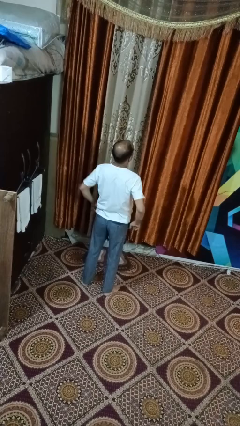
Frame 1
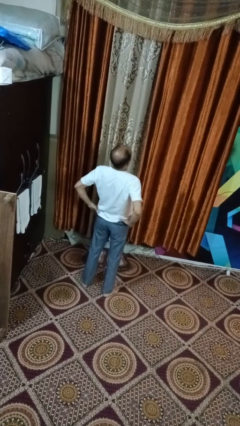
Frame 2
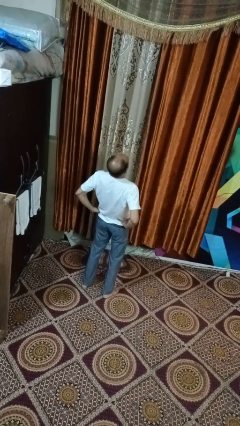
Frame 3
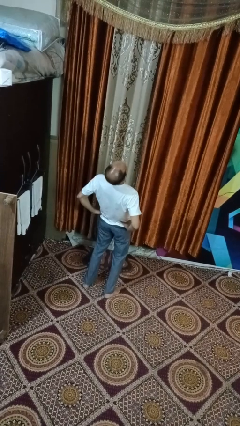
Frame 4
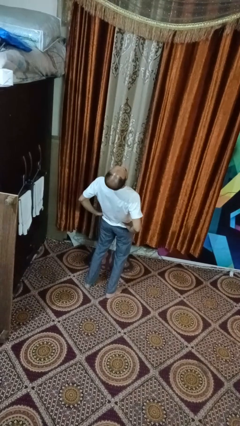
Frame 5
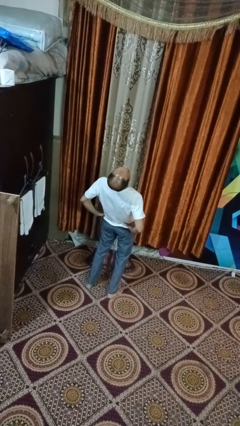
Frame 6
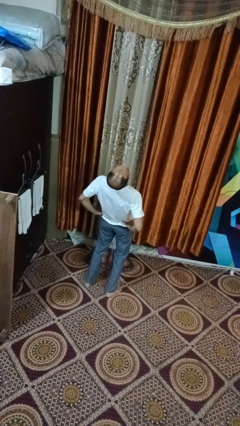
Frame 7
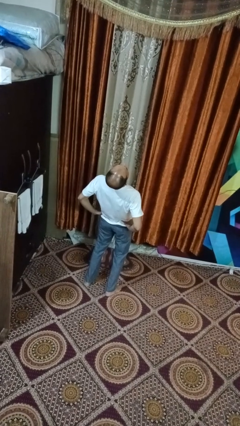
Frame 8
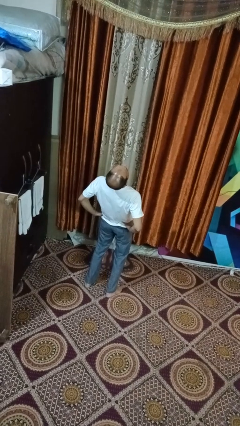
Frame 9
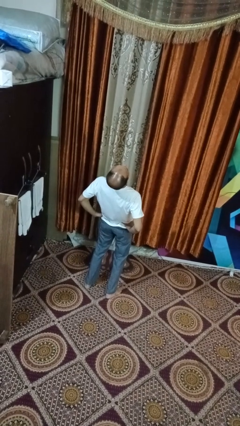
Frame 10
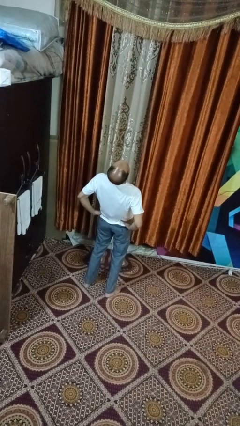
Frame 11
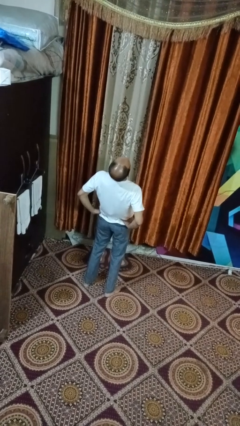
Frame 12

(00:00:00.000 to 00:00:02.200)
person stretches back

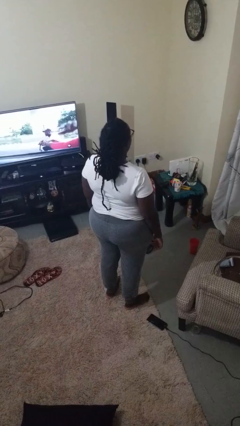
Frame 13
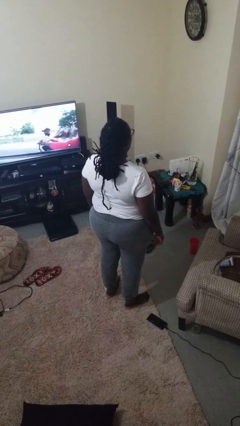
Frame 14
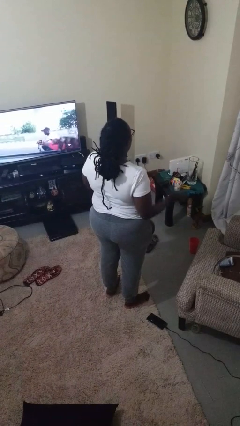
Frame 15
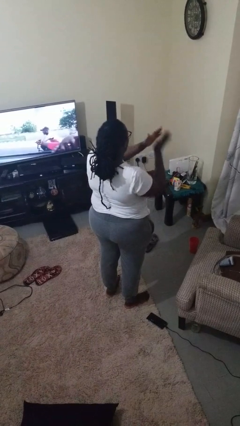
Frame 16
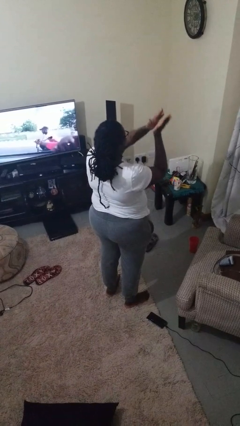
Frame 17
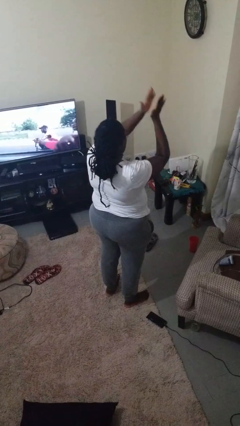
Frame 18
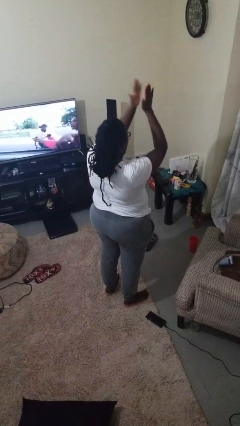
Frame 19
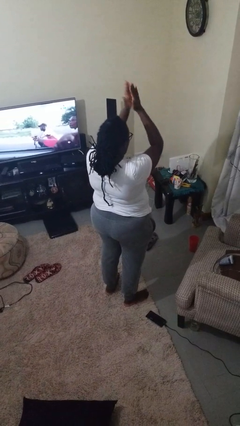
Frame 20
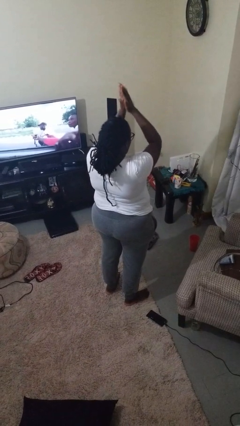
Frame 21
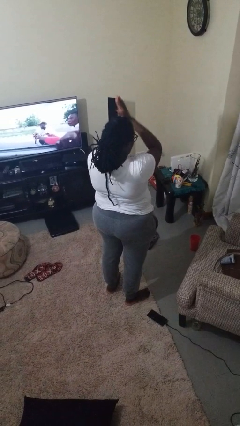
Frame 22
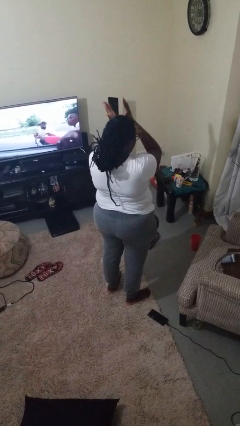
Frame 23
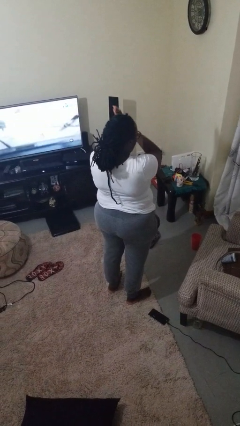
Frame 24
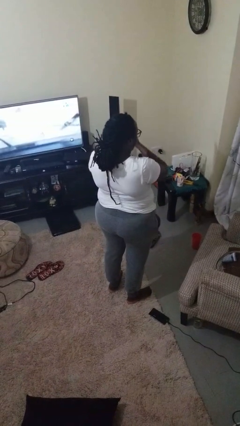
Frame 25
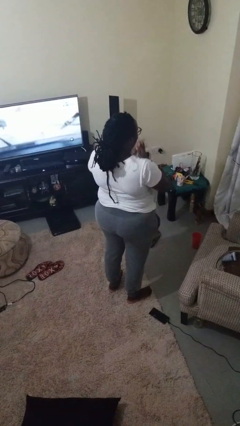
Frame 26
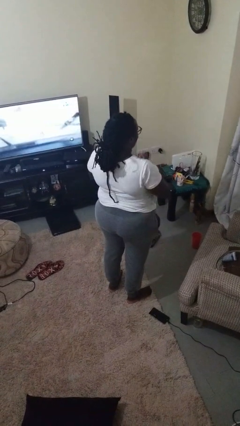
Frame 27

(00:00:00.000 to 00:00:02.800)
person claps hands

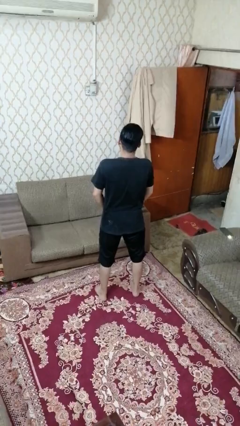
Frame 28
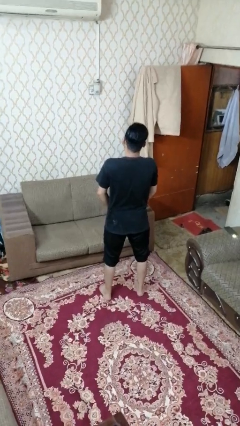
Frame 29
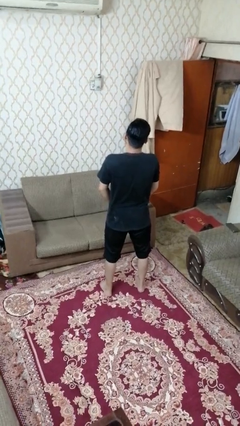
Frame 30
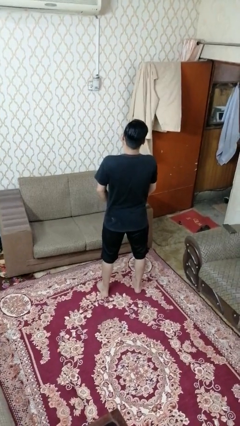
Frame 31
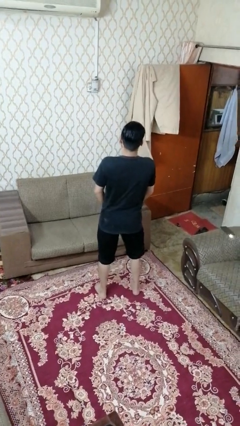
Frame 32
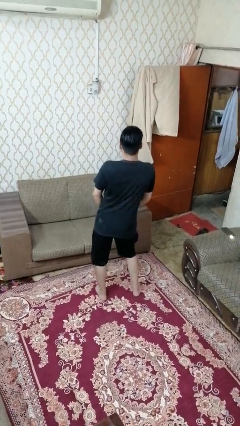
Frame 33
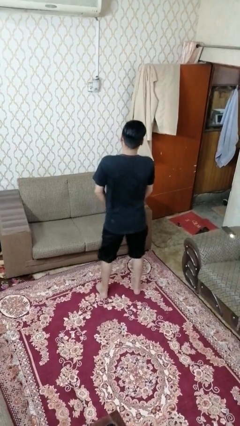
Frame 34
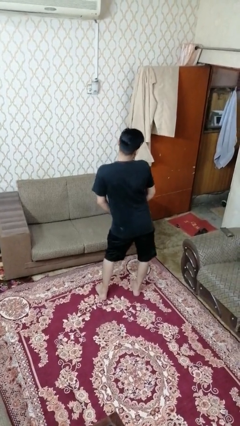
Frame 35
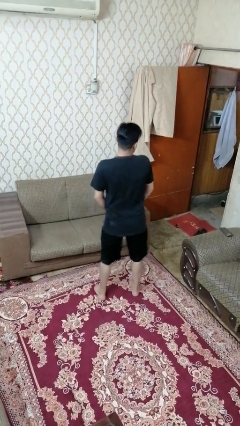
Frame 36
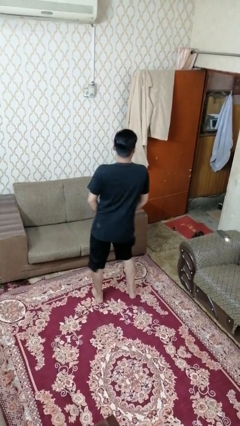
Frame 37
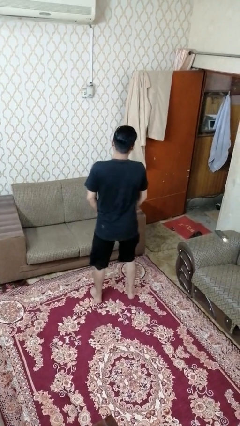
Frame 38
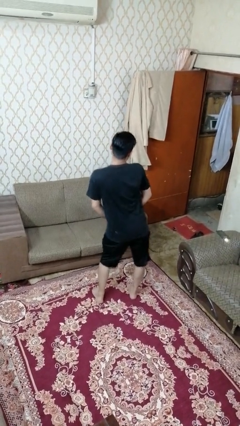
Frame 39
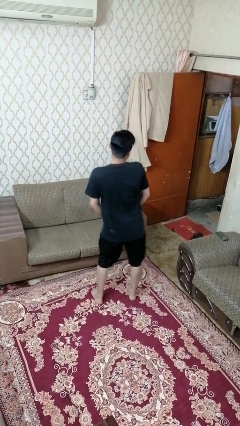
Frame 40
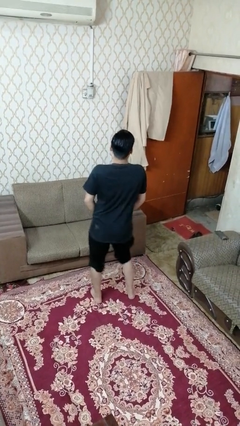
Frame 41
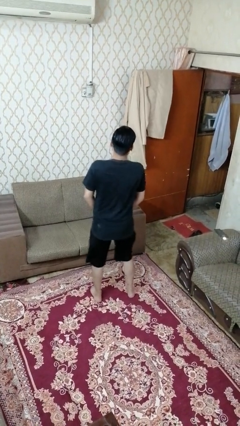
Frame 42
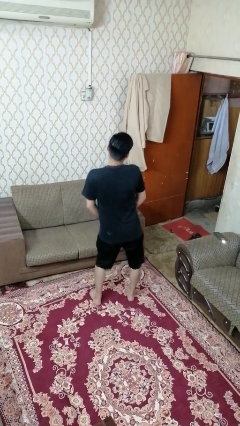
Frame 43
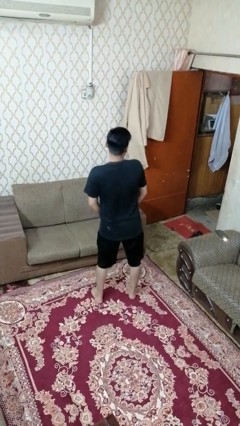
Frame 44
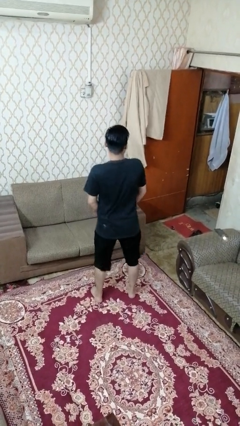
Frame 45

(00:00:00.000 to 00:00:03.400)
person wiggles hips

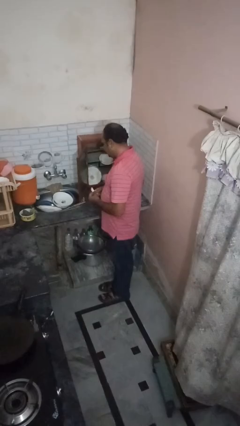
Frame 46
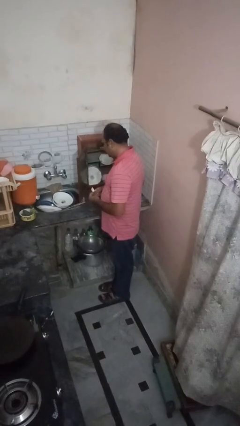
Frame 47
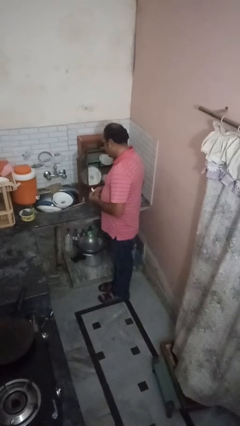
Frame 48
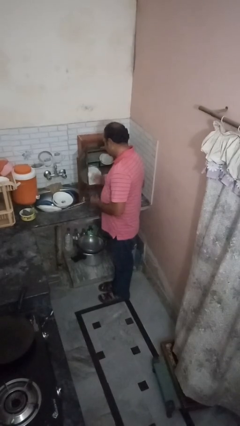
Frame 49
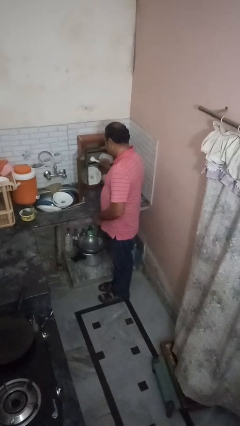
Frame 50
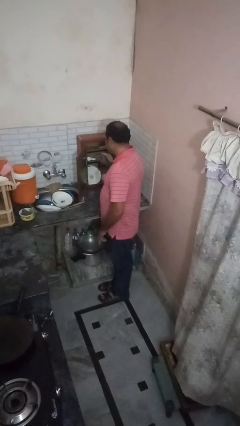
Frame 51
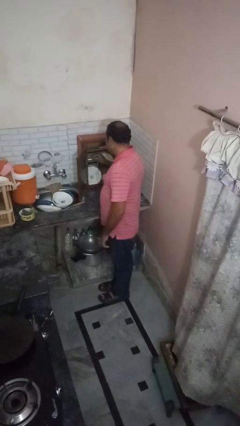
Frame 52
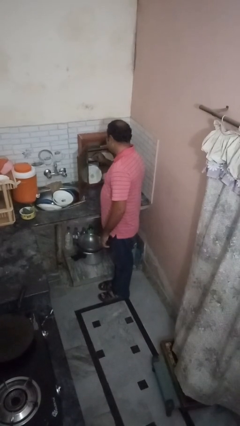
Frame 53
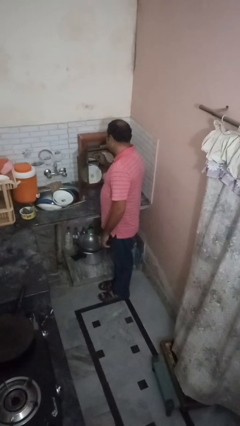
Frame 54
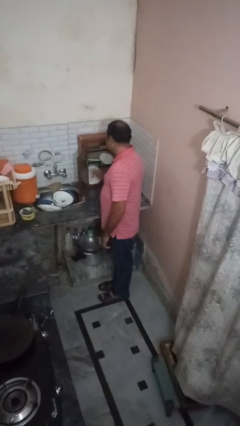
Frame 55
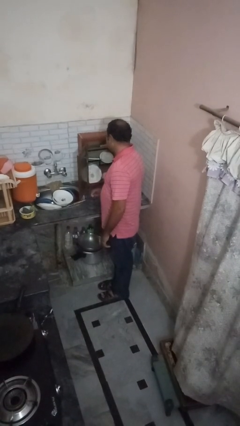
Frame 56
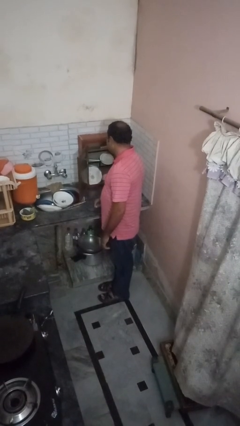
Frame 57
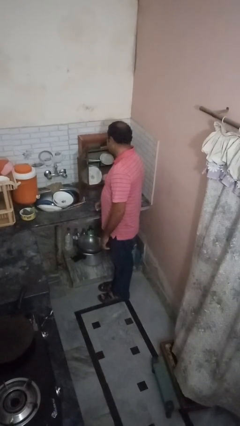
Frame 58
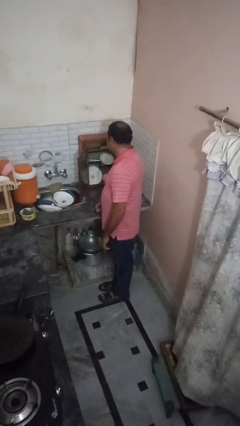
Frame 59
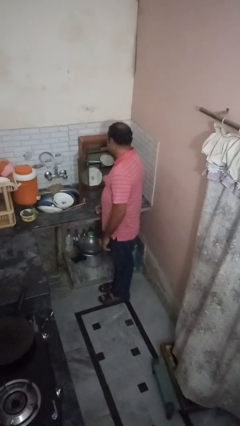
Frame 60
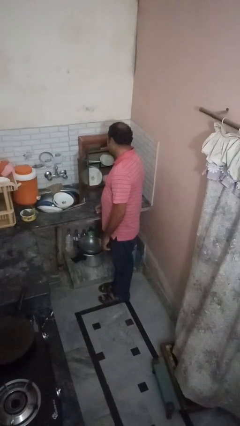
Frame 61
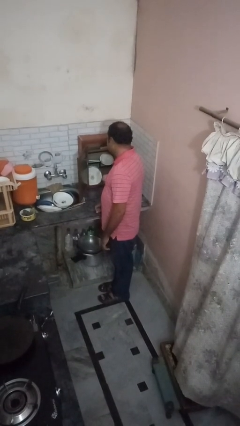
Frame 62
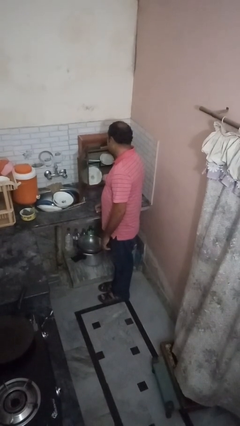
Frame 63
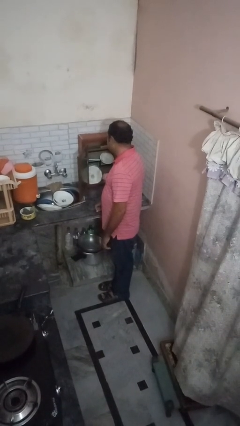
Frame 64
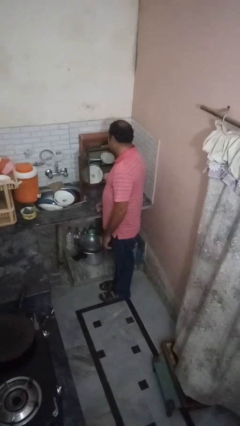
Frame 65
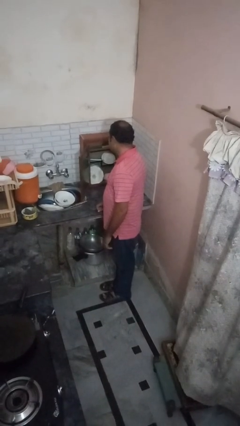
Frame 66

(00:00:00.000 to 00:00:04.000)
person takes object from cabinet

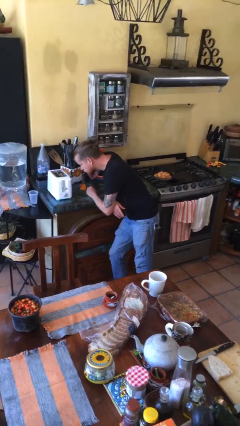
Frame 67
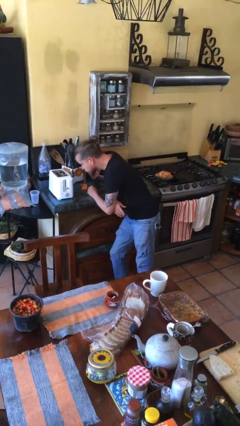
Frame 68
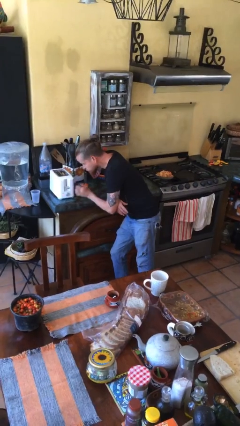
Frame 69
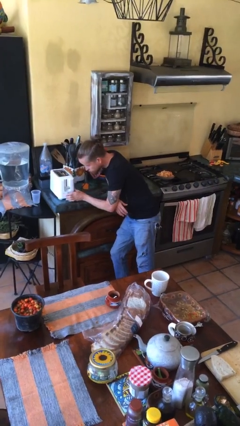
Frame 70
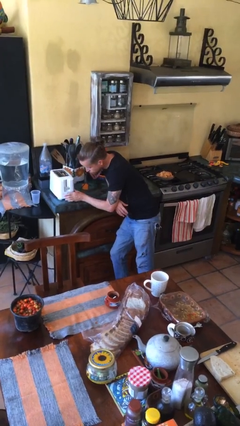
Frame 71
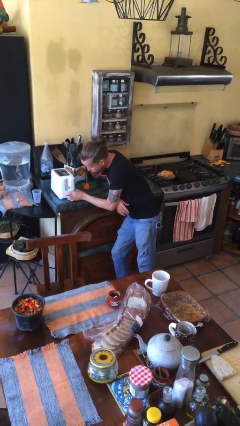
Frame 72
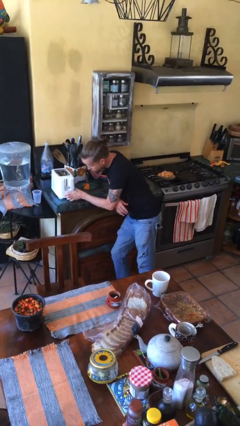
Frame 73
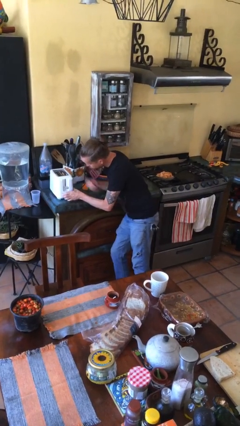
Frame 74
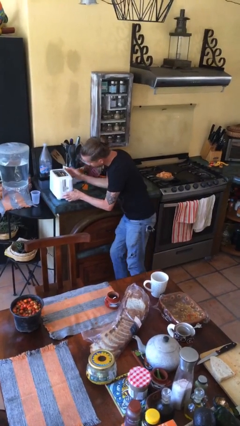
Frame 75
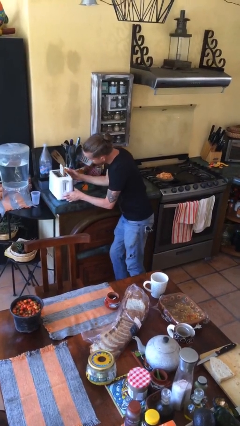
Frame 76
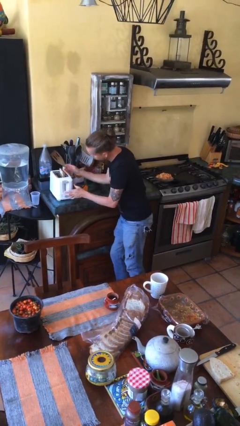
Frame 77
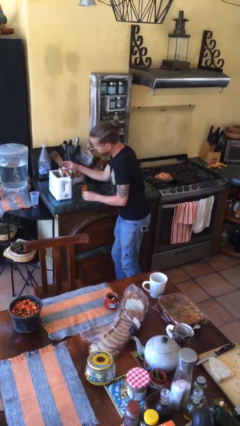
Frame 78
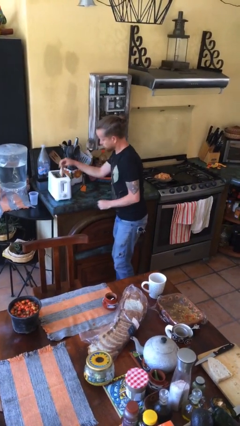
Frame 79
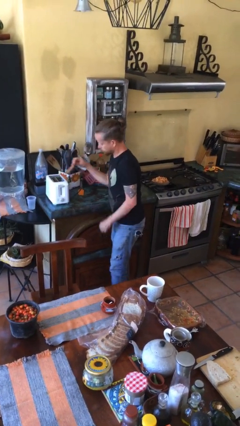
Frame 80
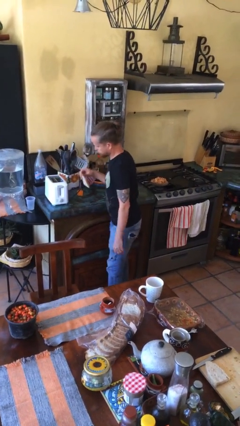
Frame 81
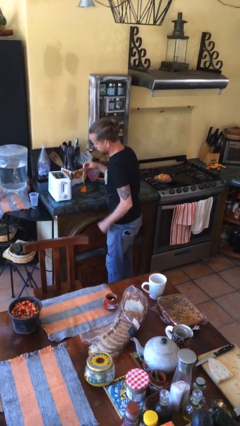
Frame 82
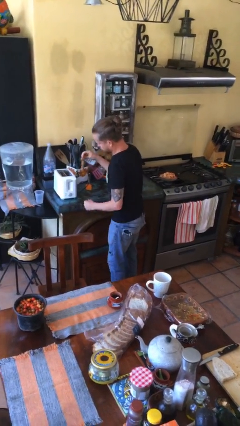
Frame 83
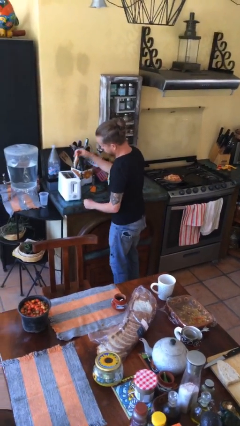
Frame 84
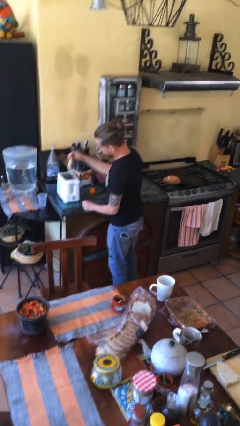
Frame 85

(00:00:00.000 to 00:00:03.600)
person takes object from toaster

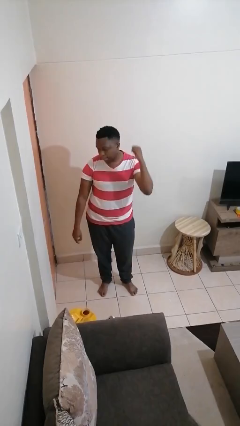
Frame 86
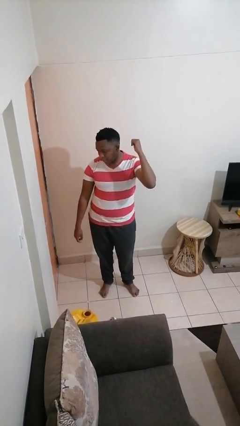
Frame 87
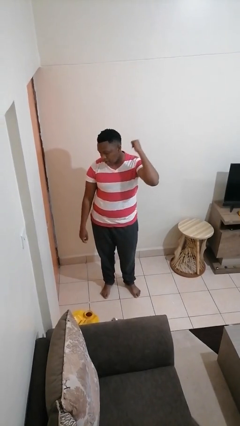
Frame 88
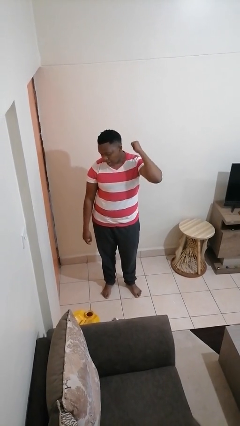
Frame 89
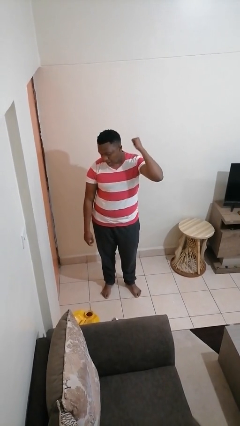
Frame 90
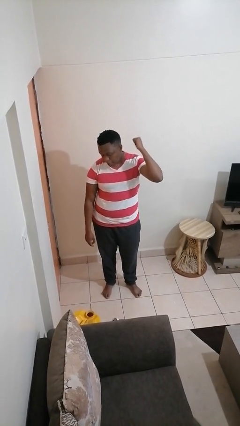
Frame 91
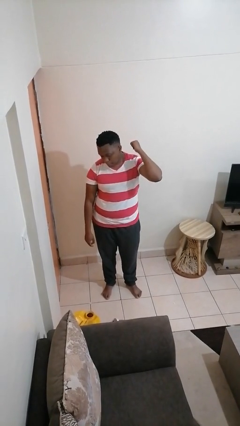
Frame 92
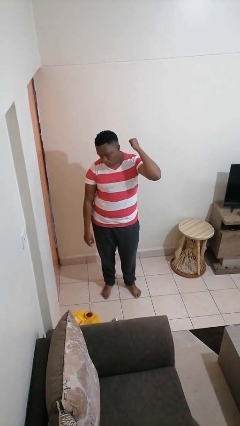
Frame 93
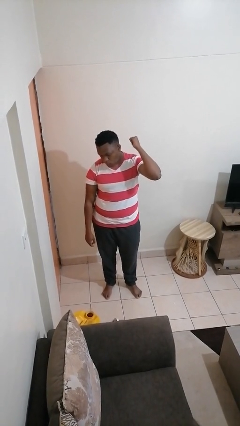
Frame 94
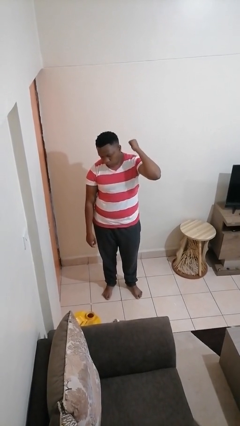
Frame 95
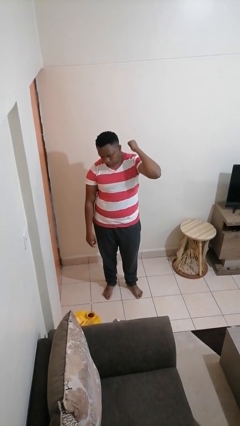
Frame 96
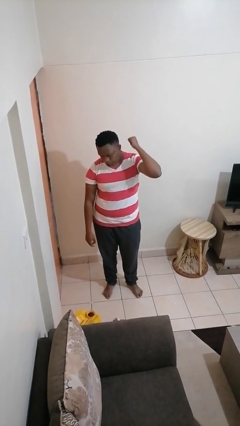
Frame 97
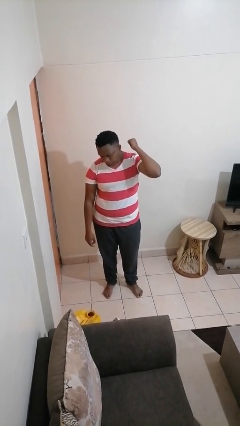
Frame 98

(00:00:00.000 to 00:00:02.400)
person gestures behind me
